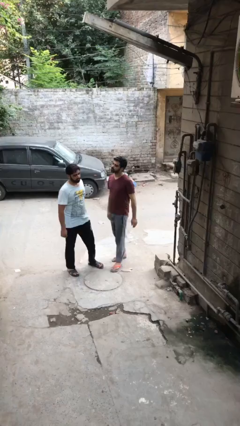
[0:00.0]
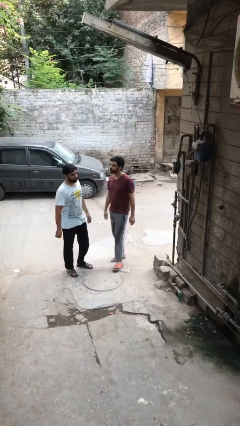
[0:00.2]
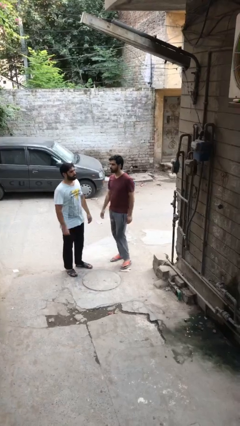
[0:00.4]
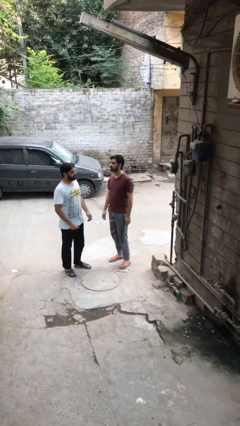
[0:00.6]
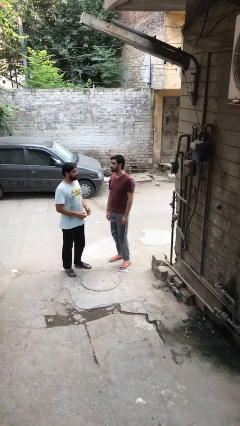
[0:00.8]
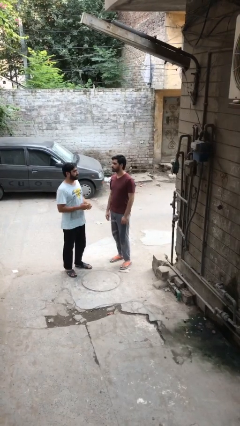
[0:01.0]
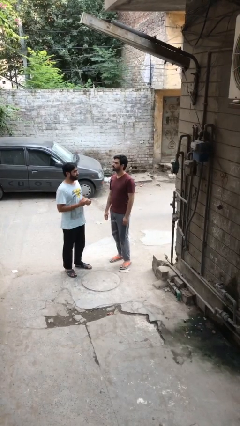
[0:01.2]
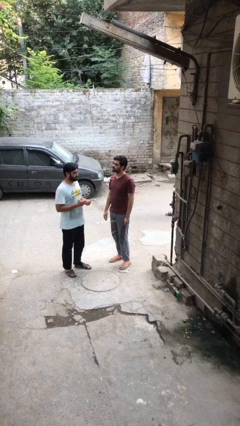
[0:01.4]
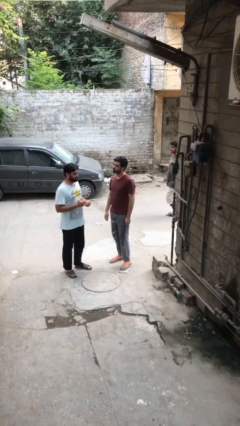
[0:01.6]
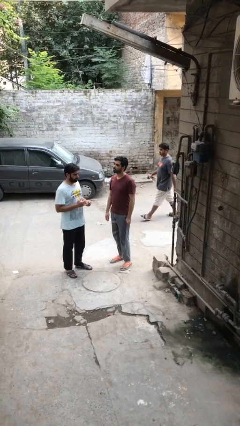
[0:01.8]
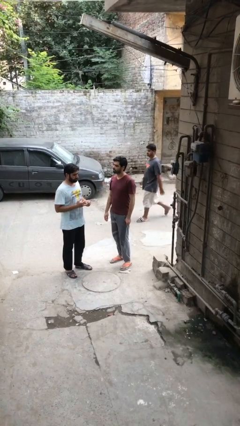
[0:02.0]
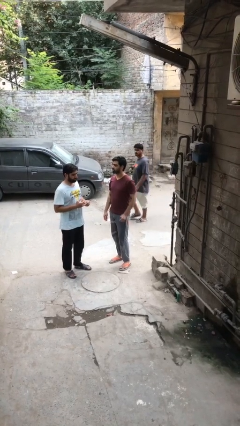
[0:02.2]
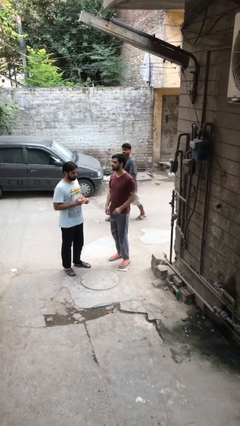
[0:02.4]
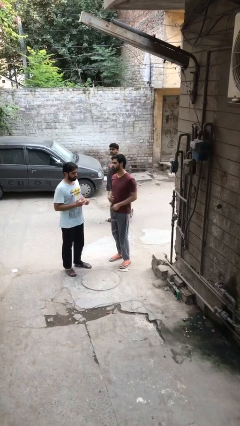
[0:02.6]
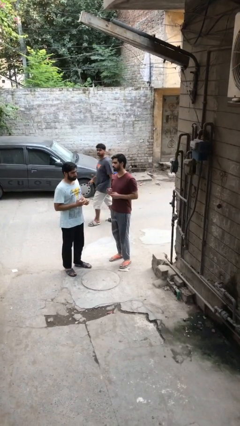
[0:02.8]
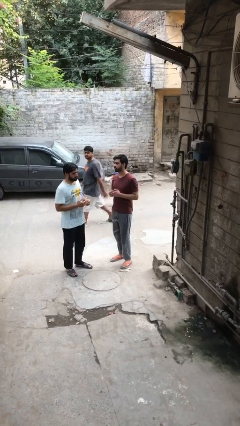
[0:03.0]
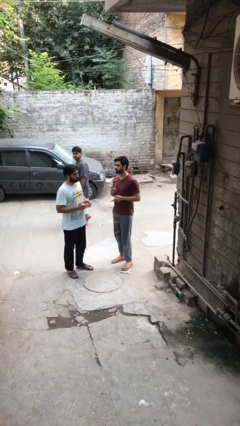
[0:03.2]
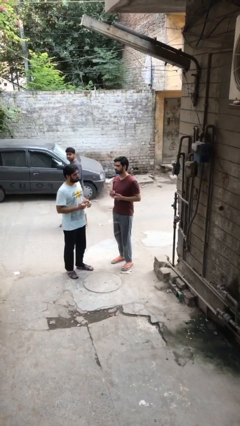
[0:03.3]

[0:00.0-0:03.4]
person talks to person

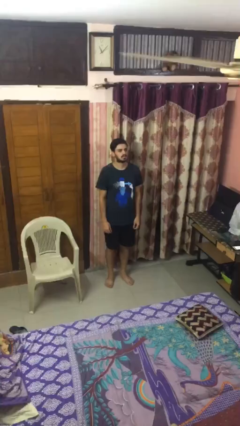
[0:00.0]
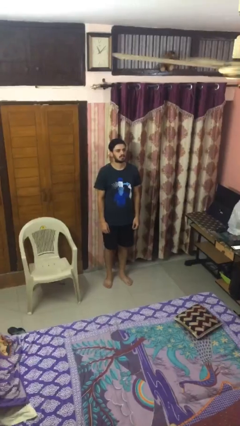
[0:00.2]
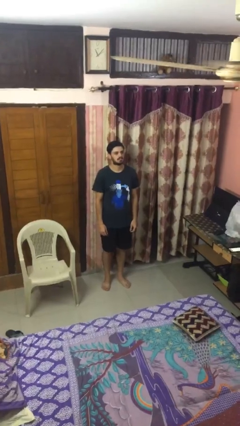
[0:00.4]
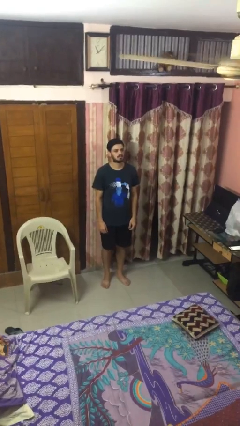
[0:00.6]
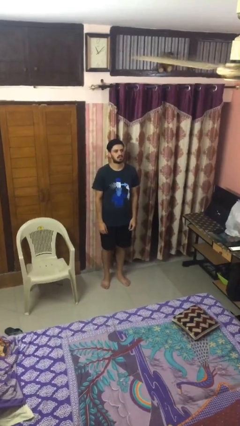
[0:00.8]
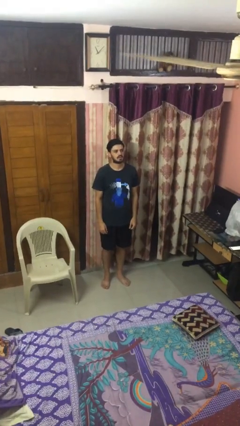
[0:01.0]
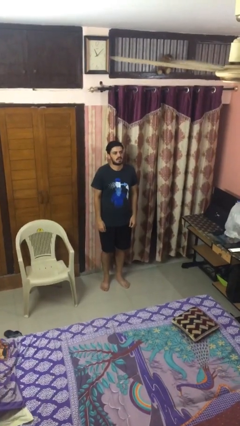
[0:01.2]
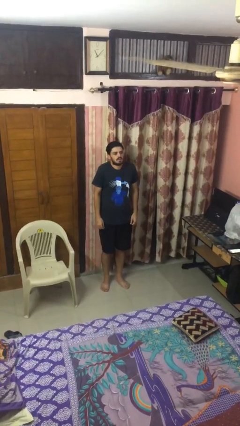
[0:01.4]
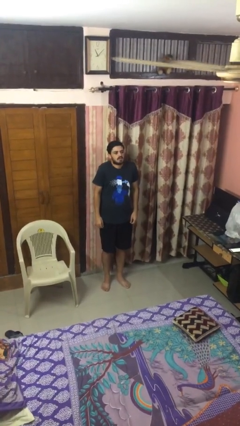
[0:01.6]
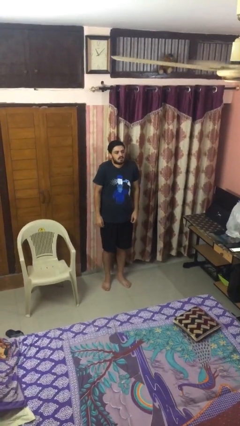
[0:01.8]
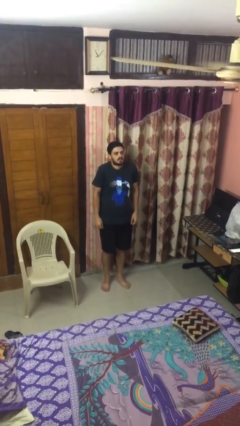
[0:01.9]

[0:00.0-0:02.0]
person shrugs

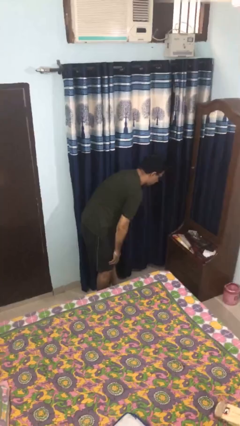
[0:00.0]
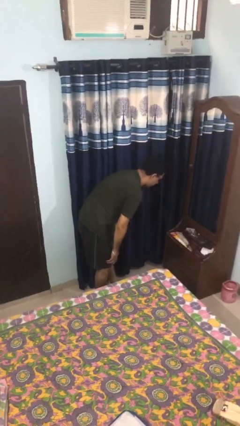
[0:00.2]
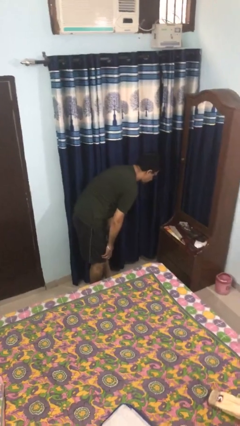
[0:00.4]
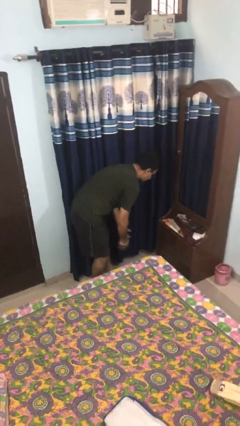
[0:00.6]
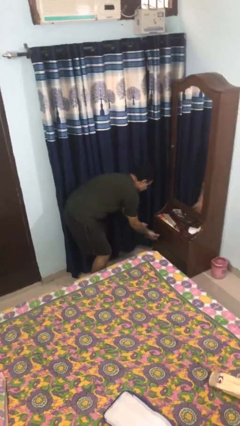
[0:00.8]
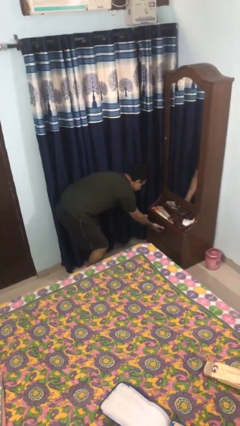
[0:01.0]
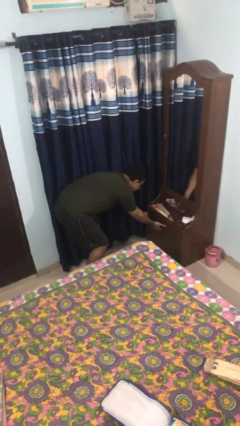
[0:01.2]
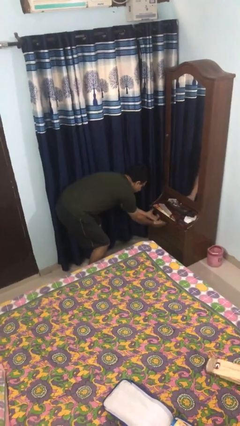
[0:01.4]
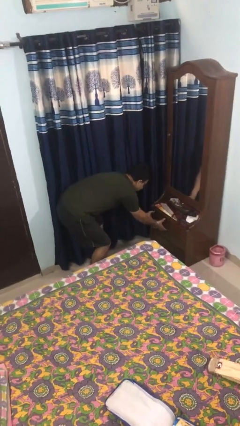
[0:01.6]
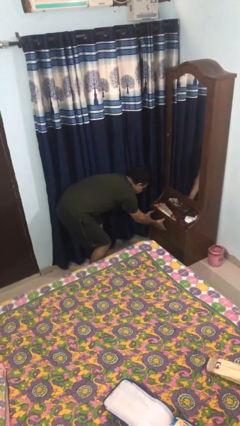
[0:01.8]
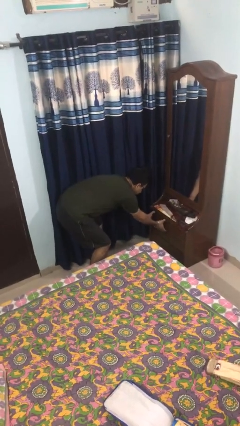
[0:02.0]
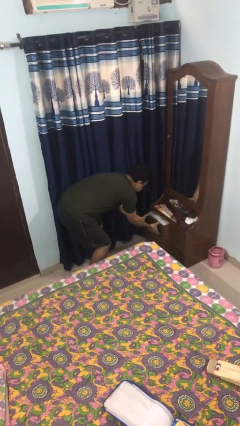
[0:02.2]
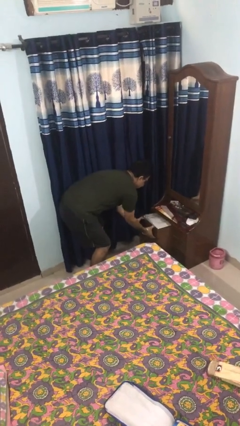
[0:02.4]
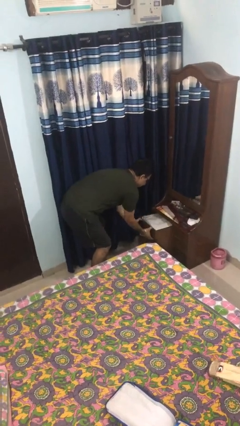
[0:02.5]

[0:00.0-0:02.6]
person opens dresser drawer

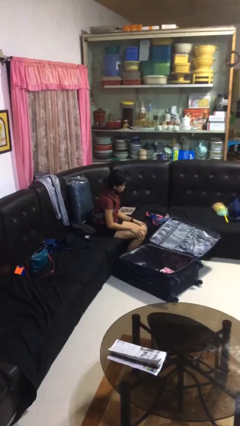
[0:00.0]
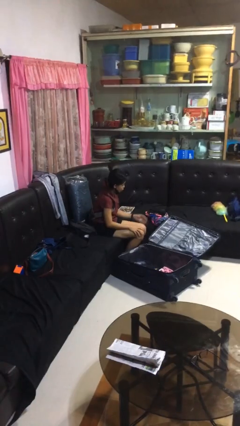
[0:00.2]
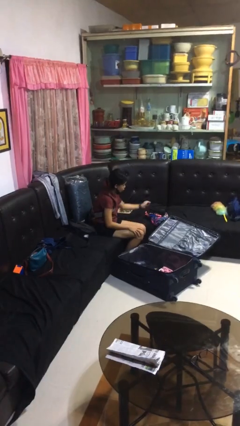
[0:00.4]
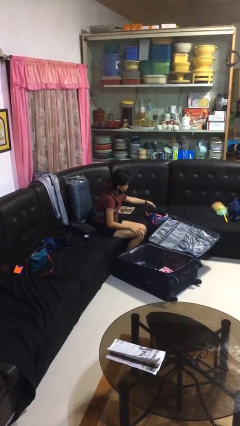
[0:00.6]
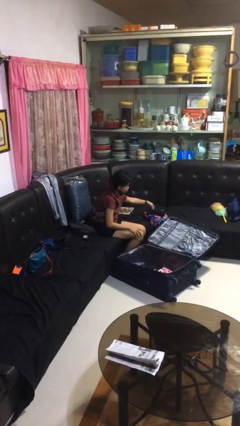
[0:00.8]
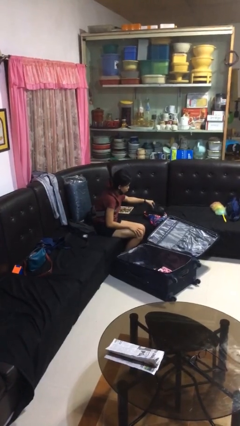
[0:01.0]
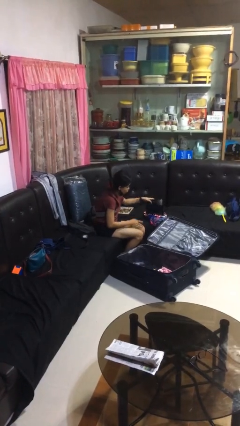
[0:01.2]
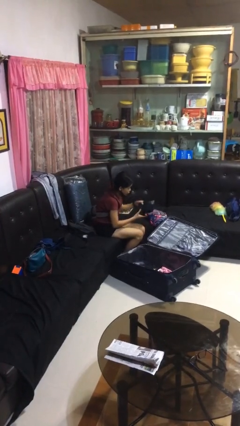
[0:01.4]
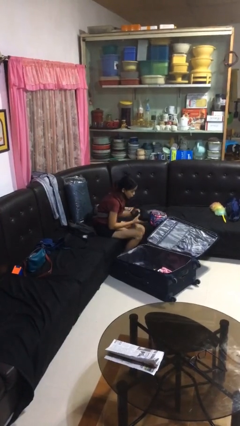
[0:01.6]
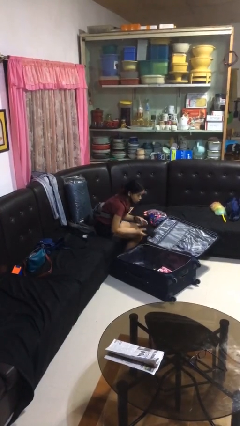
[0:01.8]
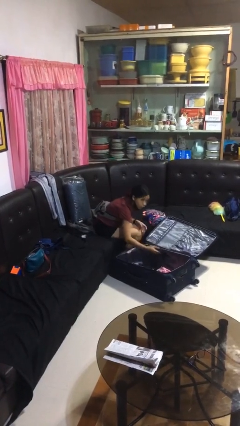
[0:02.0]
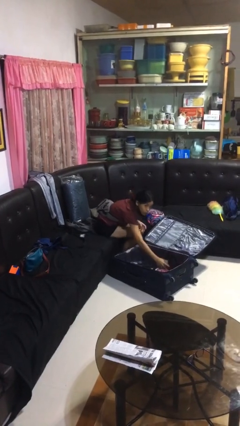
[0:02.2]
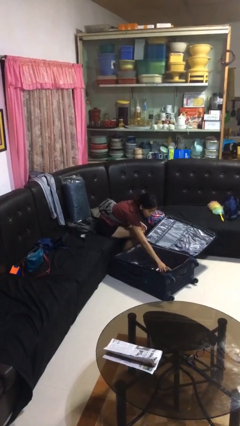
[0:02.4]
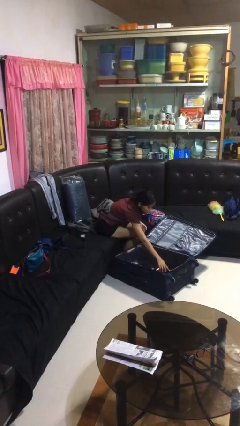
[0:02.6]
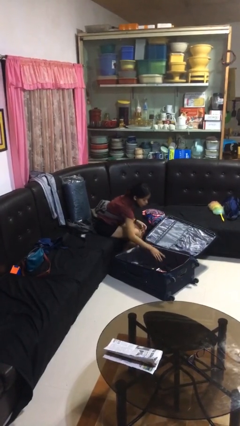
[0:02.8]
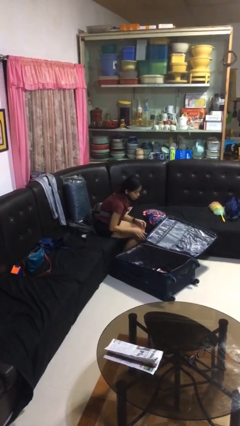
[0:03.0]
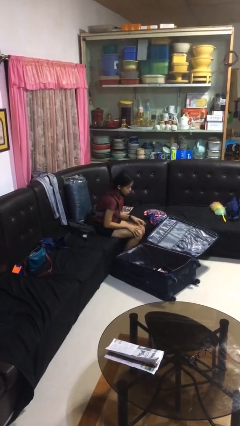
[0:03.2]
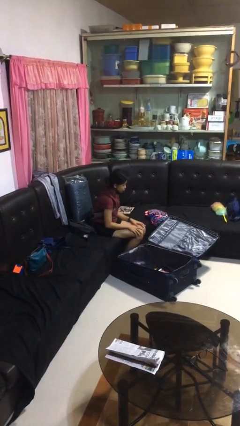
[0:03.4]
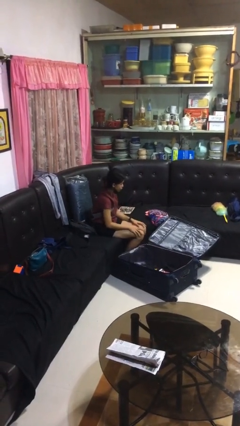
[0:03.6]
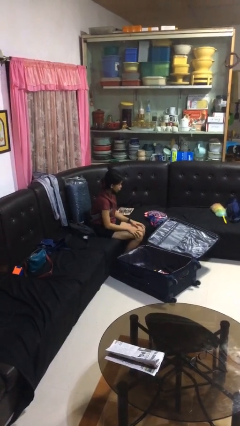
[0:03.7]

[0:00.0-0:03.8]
person loads clothes into suitcase

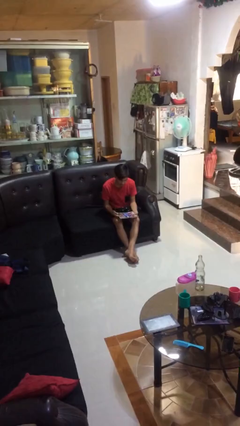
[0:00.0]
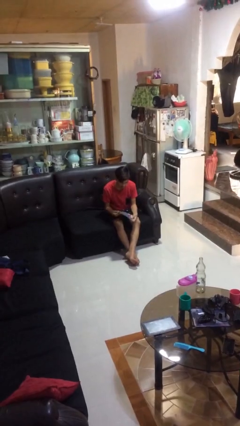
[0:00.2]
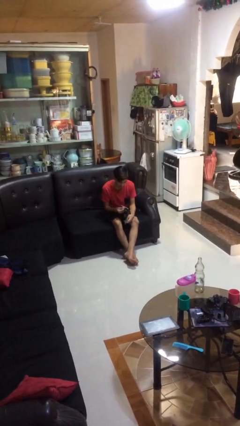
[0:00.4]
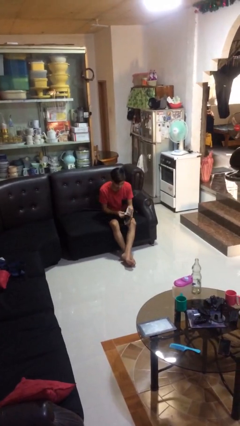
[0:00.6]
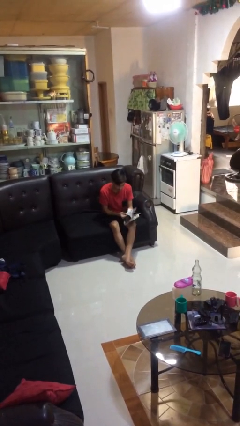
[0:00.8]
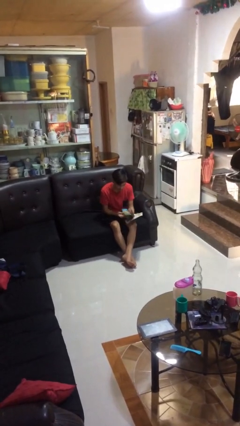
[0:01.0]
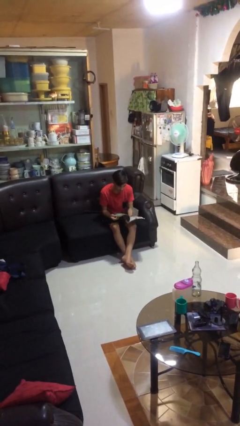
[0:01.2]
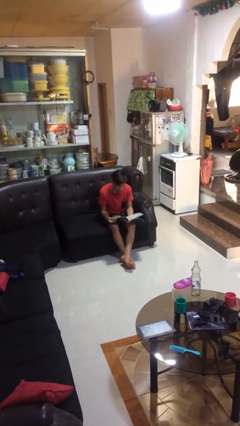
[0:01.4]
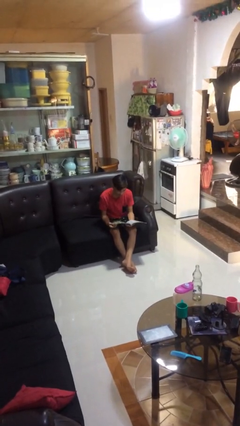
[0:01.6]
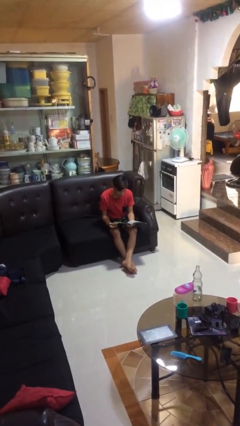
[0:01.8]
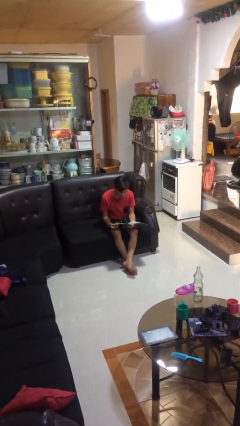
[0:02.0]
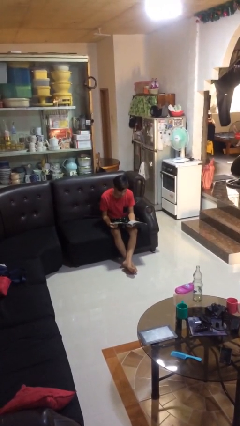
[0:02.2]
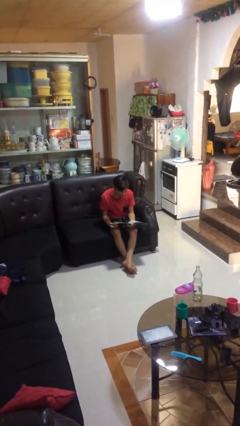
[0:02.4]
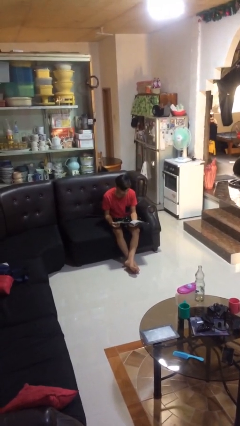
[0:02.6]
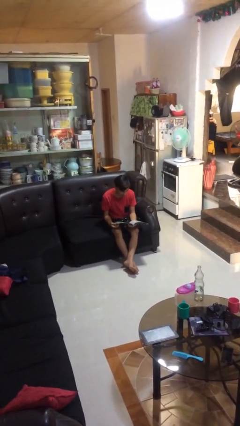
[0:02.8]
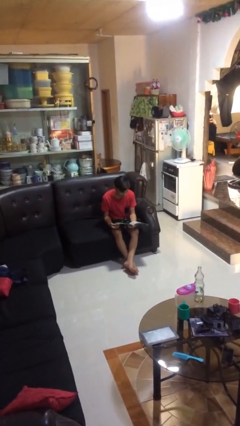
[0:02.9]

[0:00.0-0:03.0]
person reads magazine

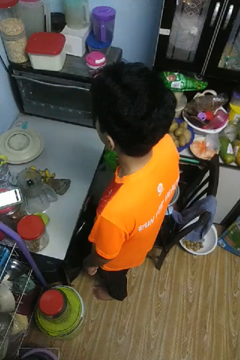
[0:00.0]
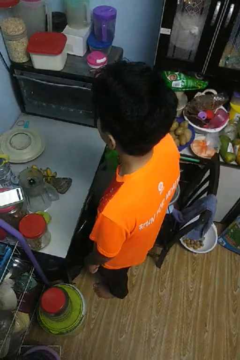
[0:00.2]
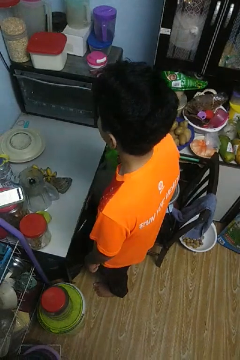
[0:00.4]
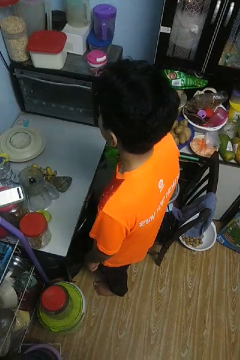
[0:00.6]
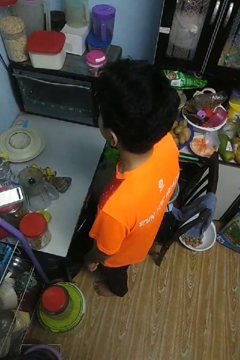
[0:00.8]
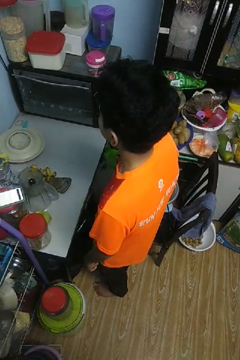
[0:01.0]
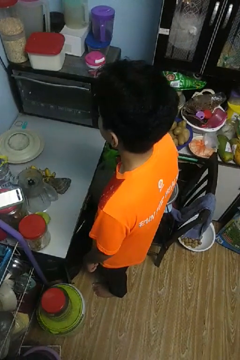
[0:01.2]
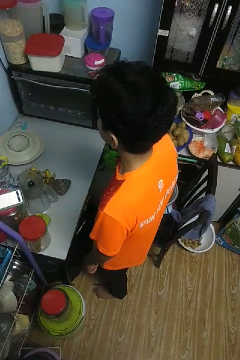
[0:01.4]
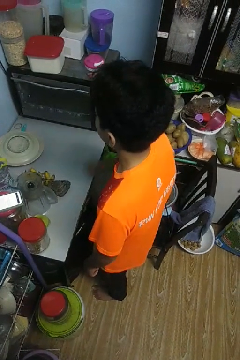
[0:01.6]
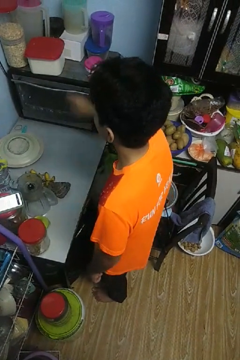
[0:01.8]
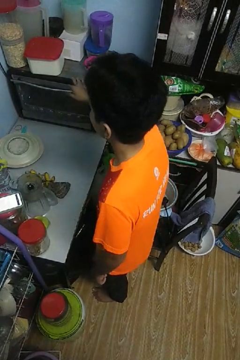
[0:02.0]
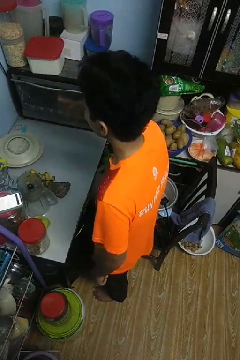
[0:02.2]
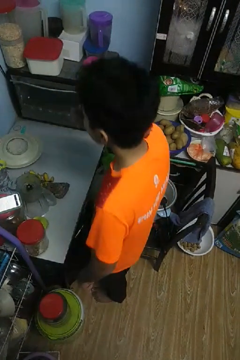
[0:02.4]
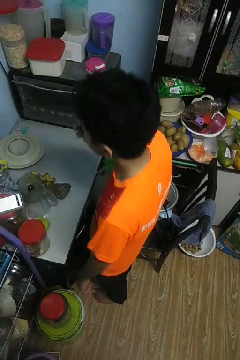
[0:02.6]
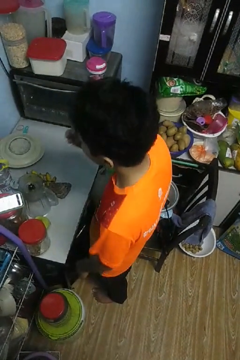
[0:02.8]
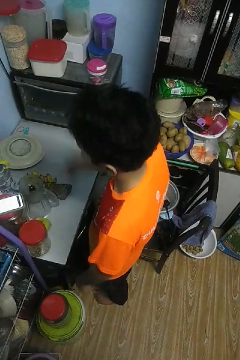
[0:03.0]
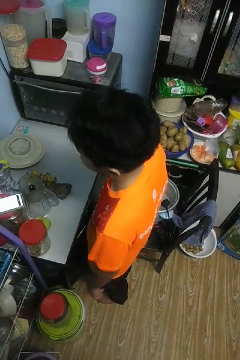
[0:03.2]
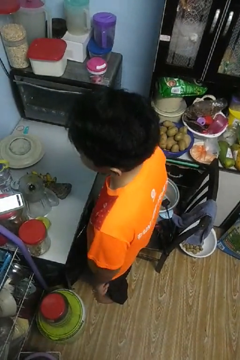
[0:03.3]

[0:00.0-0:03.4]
person burns hand
